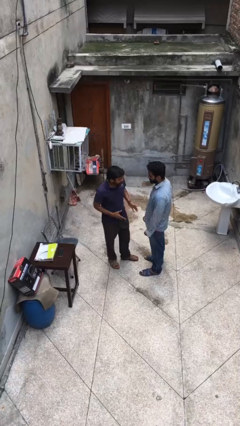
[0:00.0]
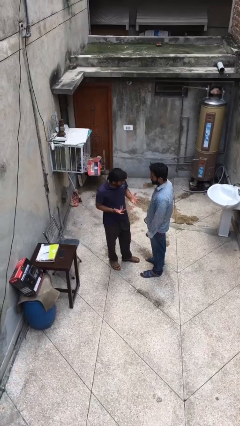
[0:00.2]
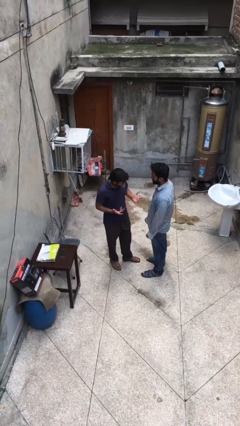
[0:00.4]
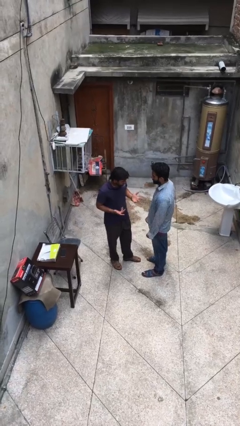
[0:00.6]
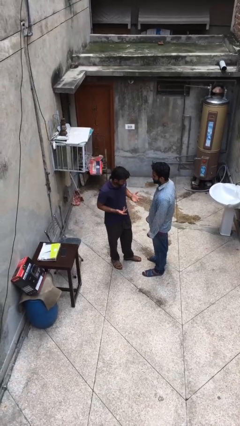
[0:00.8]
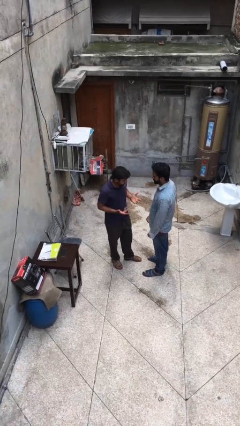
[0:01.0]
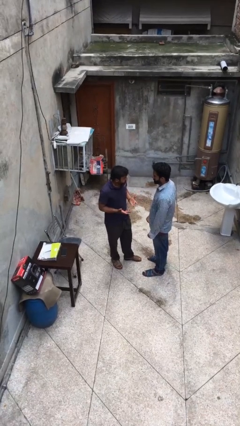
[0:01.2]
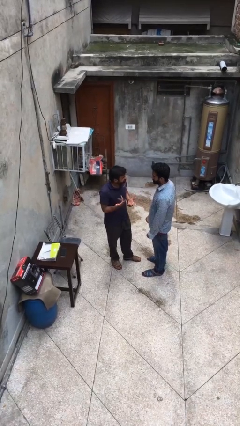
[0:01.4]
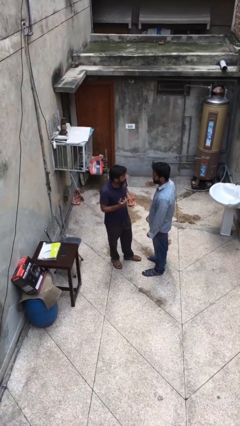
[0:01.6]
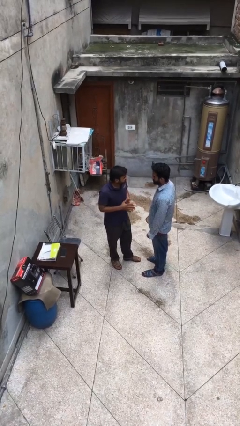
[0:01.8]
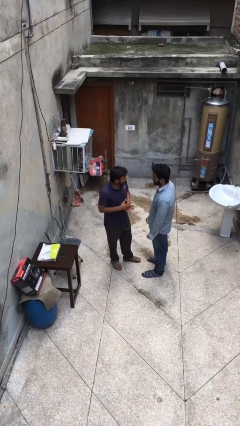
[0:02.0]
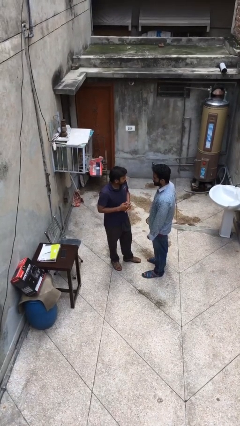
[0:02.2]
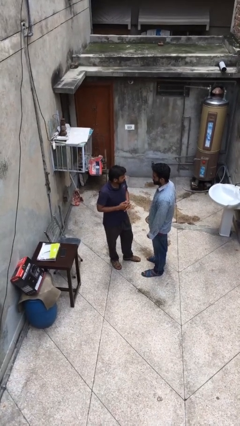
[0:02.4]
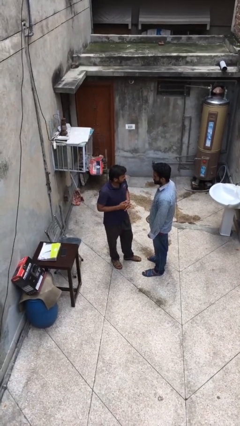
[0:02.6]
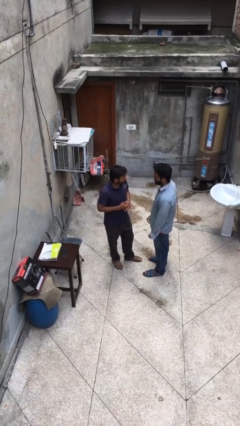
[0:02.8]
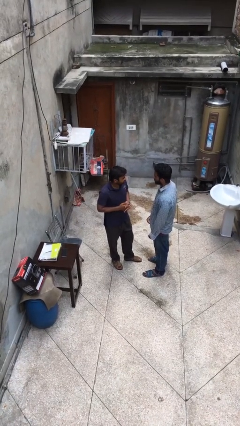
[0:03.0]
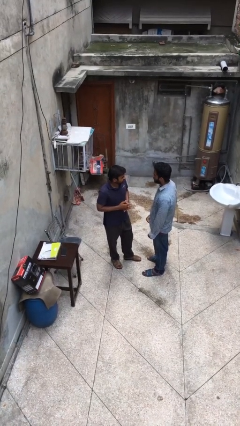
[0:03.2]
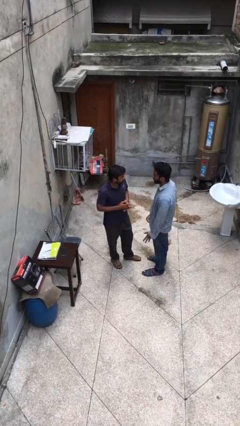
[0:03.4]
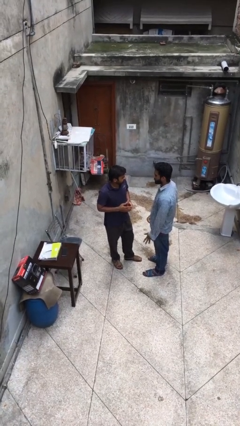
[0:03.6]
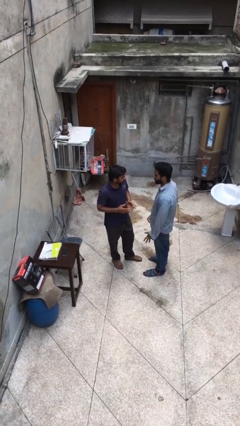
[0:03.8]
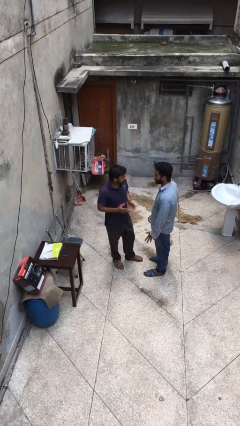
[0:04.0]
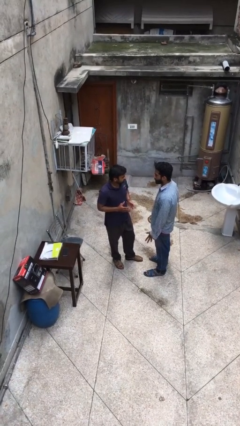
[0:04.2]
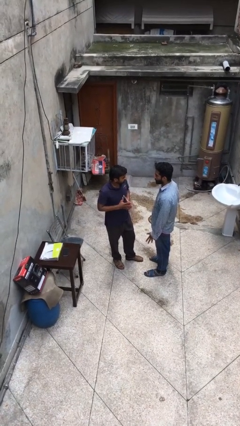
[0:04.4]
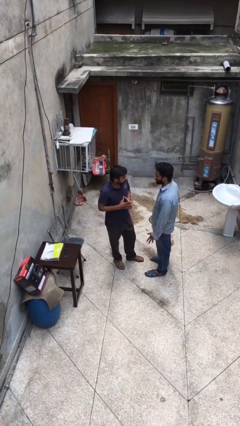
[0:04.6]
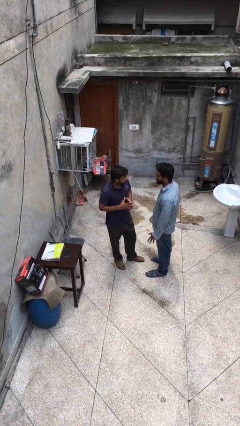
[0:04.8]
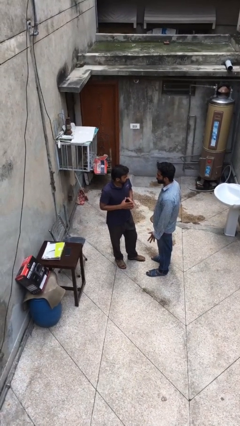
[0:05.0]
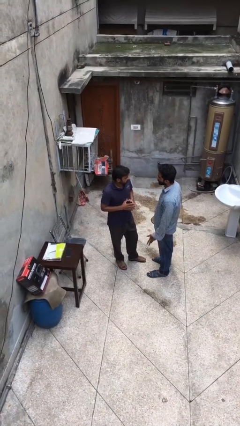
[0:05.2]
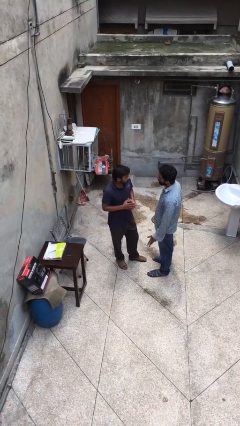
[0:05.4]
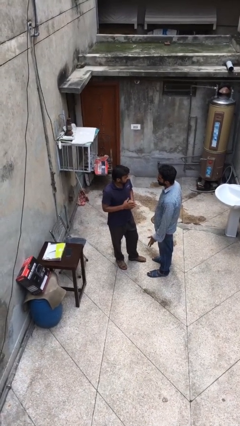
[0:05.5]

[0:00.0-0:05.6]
person talks to person

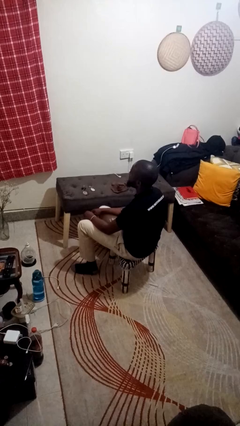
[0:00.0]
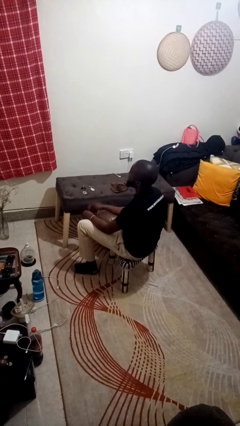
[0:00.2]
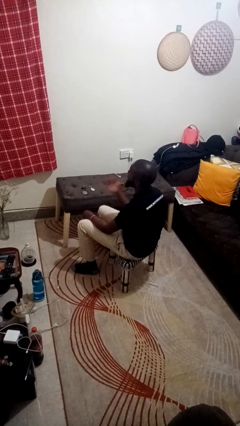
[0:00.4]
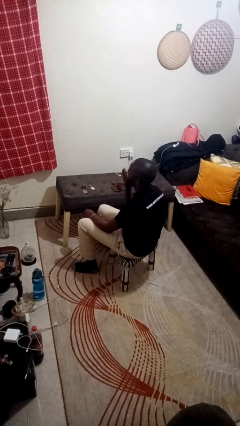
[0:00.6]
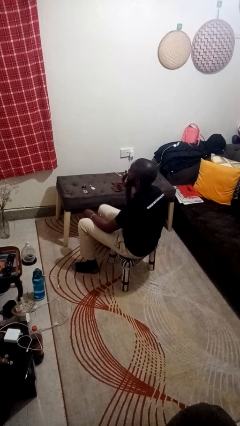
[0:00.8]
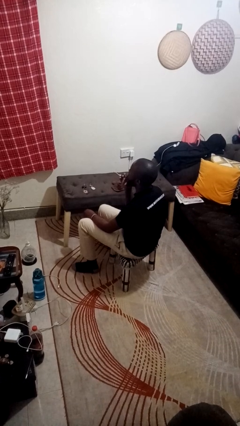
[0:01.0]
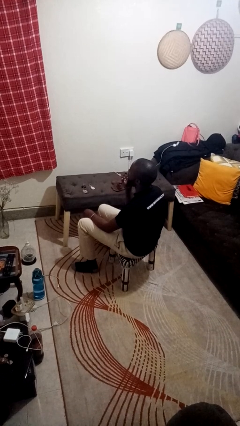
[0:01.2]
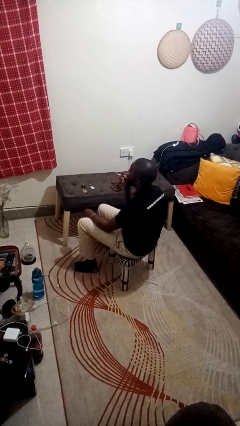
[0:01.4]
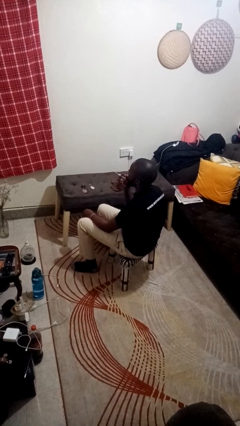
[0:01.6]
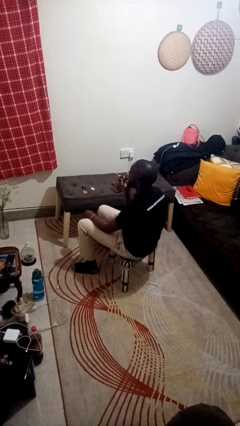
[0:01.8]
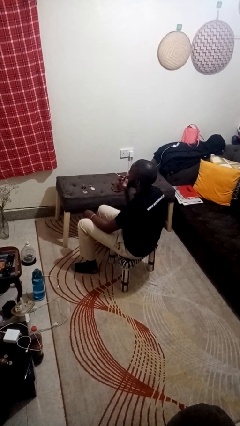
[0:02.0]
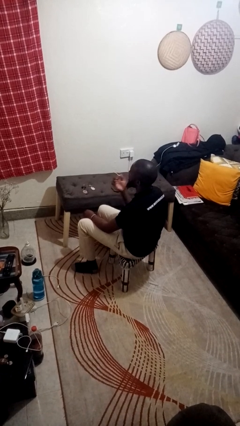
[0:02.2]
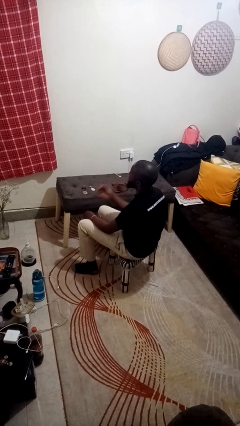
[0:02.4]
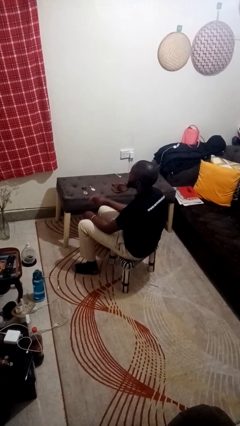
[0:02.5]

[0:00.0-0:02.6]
person licks fingers

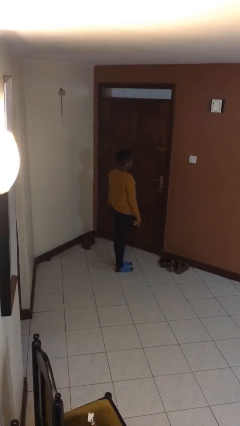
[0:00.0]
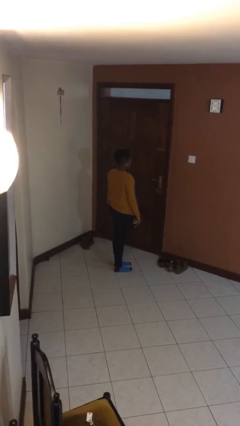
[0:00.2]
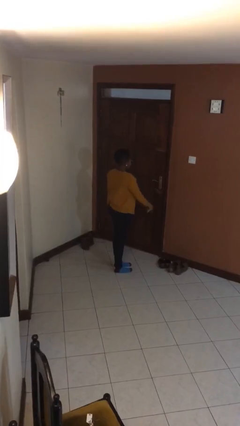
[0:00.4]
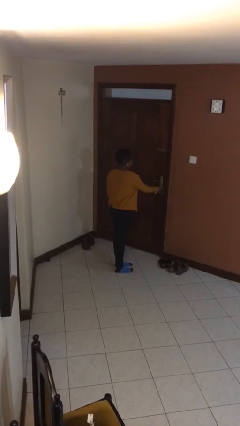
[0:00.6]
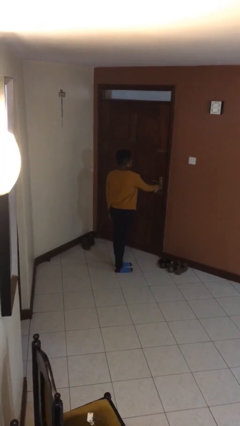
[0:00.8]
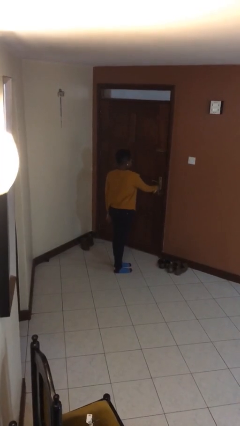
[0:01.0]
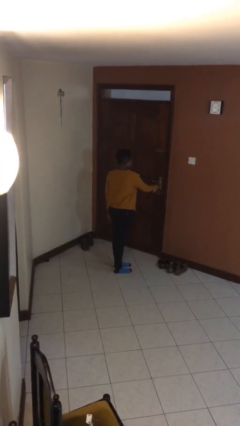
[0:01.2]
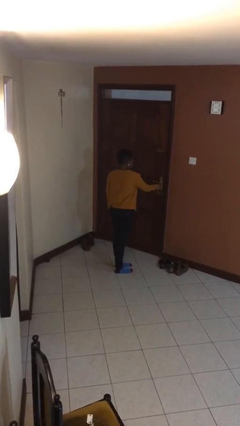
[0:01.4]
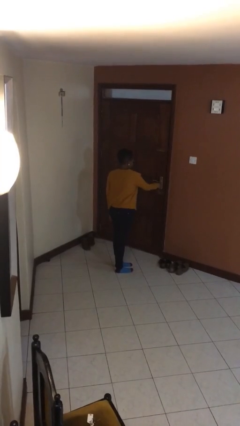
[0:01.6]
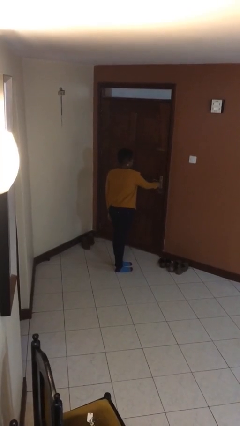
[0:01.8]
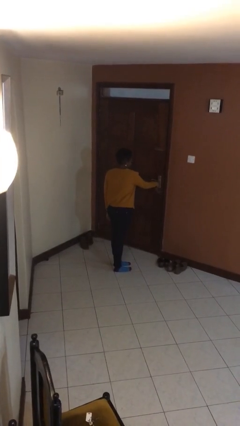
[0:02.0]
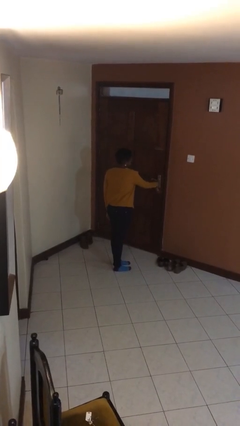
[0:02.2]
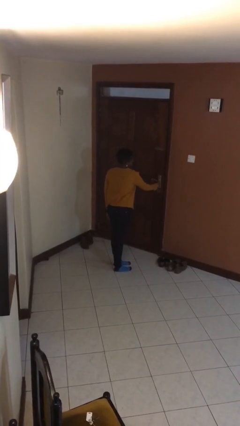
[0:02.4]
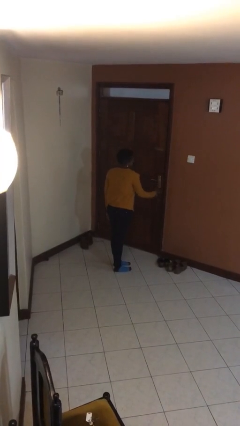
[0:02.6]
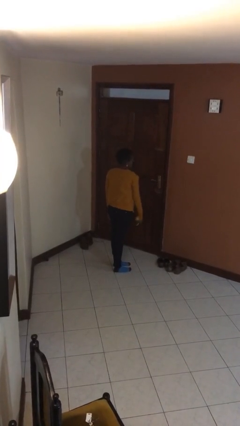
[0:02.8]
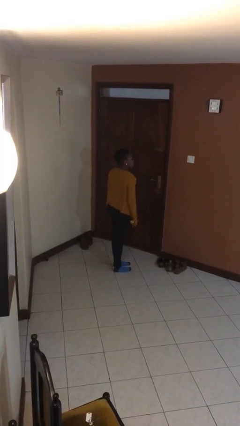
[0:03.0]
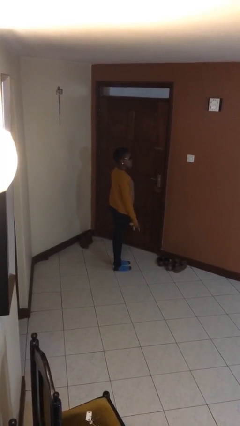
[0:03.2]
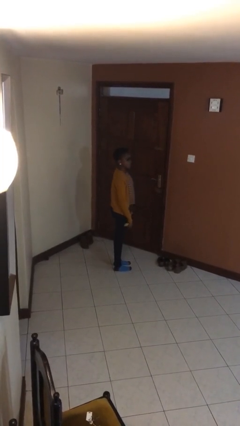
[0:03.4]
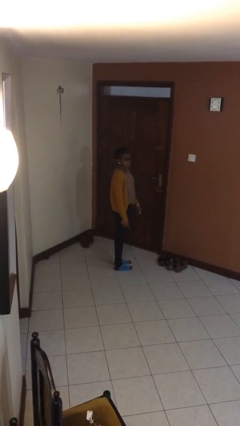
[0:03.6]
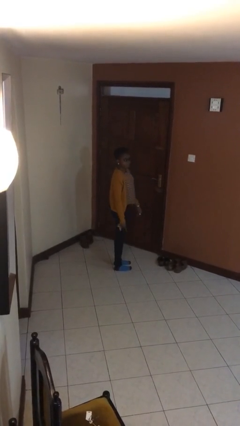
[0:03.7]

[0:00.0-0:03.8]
person locks door with keys

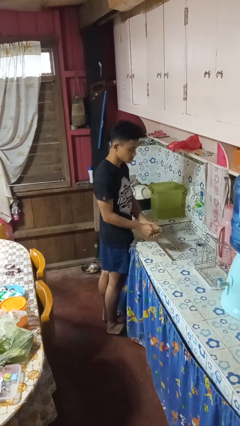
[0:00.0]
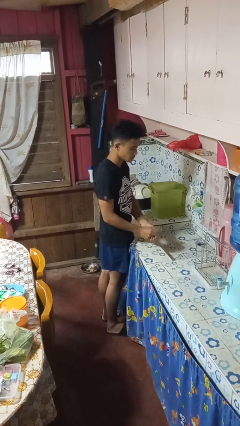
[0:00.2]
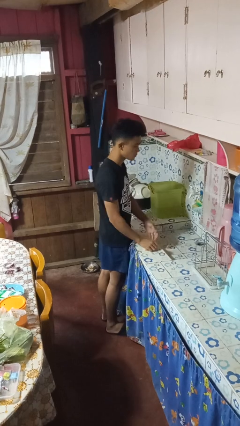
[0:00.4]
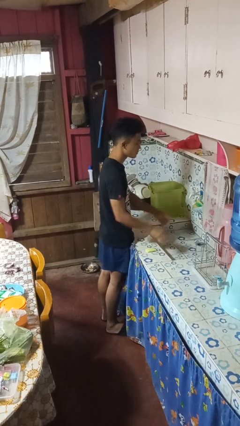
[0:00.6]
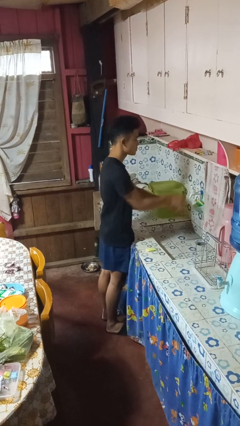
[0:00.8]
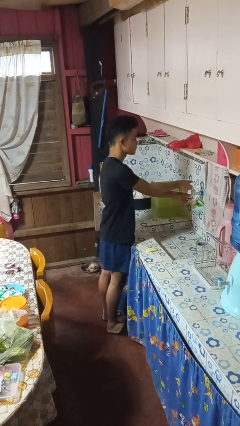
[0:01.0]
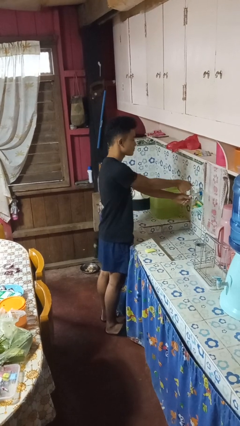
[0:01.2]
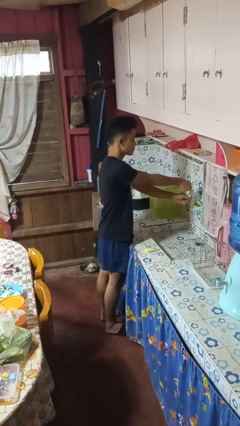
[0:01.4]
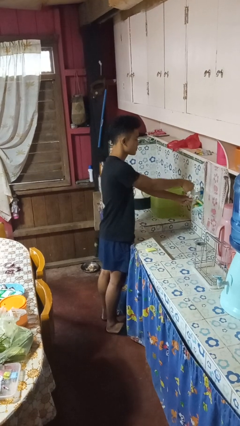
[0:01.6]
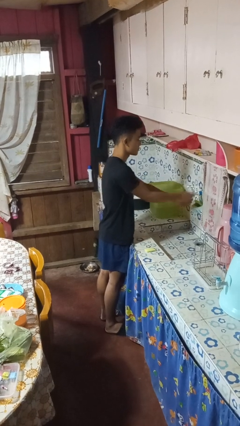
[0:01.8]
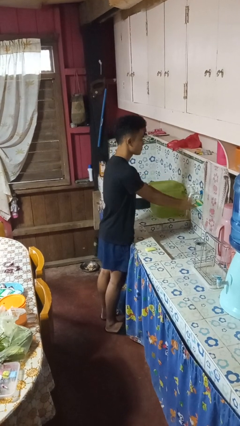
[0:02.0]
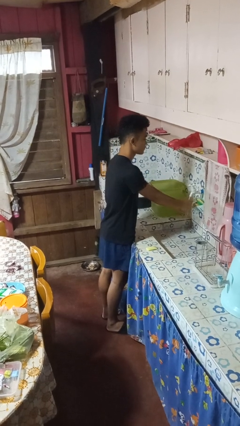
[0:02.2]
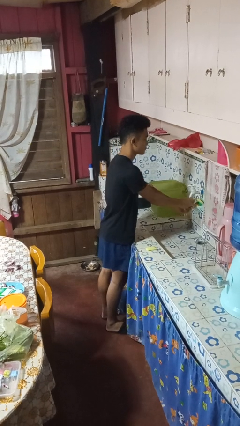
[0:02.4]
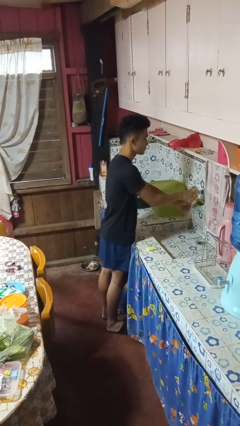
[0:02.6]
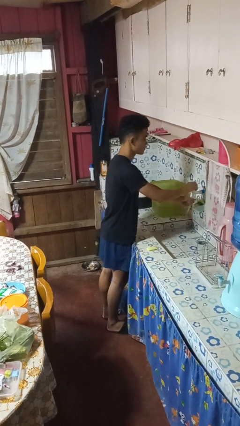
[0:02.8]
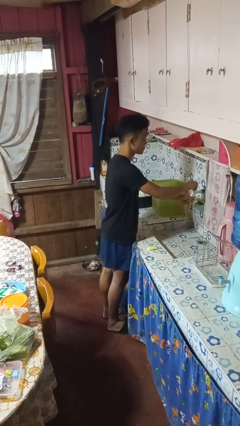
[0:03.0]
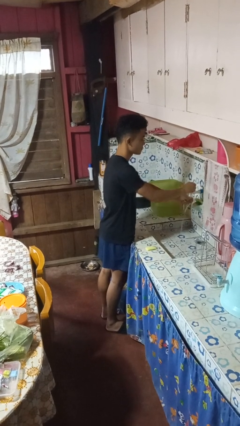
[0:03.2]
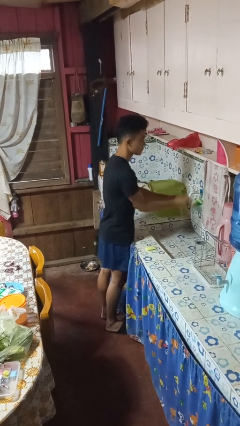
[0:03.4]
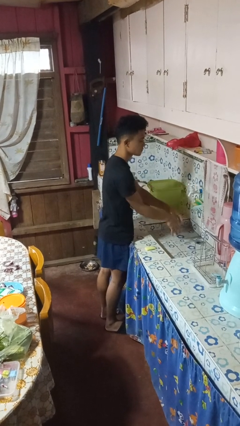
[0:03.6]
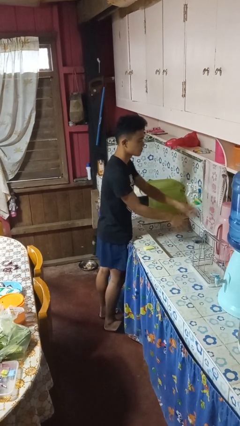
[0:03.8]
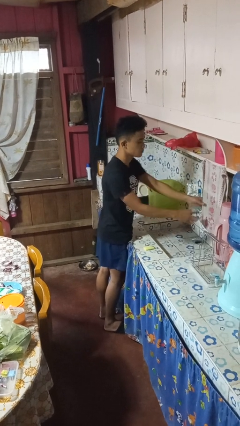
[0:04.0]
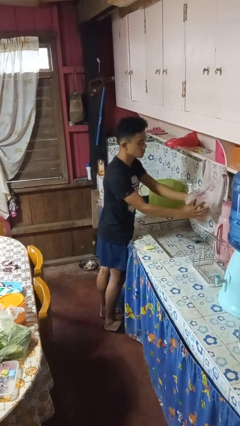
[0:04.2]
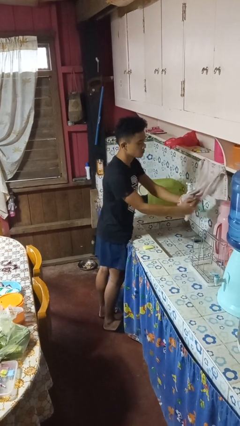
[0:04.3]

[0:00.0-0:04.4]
person washes hands

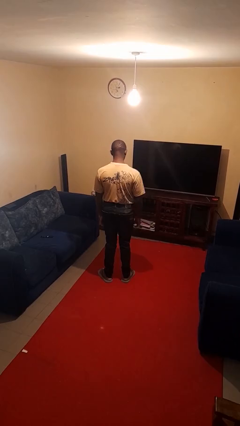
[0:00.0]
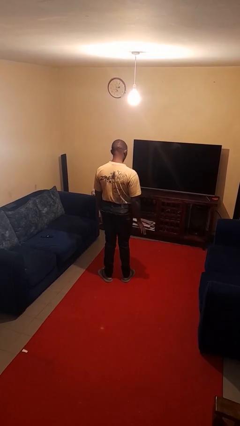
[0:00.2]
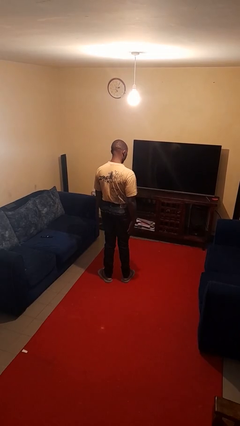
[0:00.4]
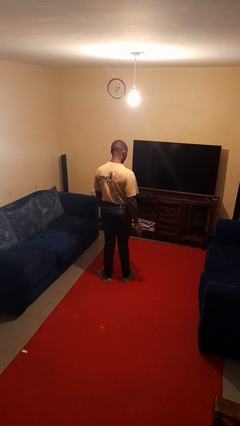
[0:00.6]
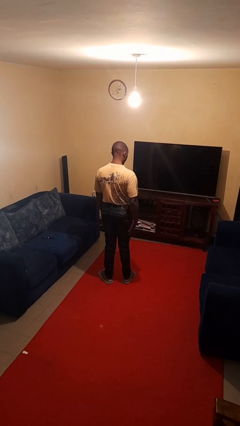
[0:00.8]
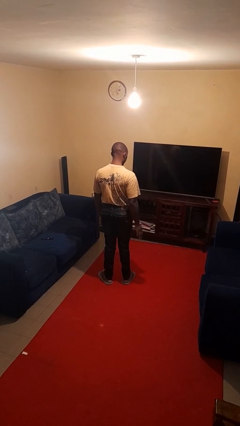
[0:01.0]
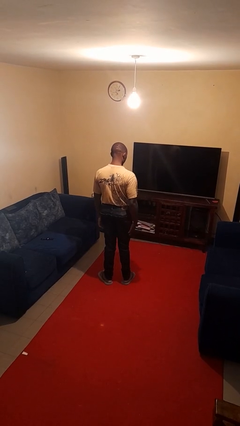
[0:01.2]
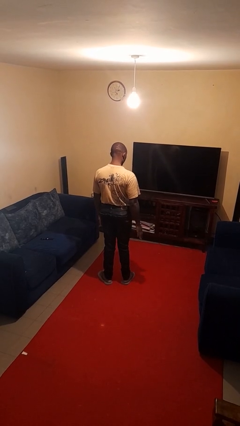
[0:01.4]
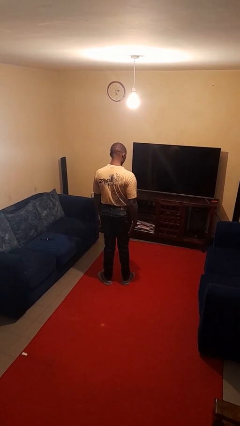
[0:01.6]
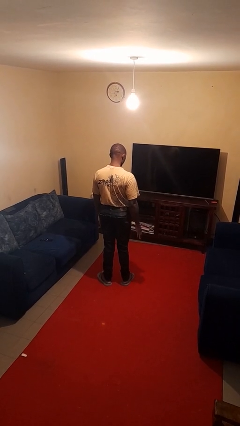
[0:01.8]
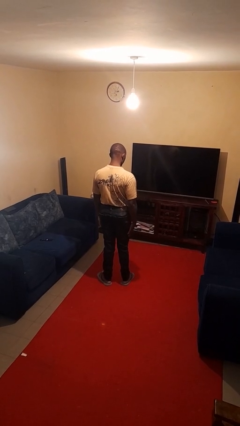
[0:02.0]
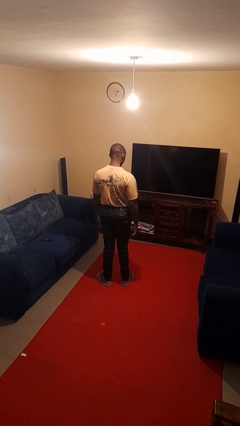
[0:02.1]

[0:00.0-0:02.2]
person slaps hands on thighs
